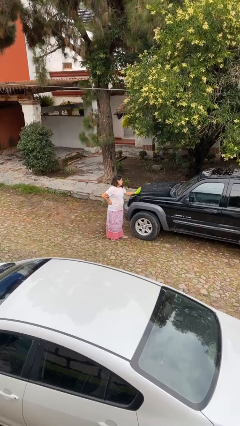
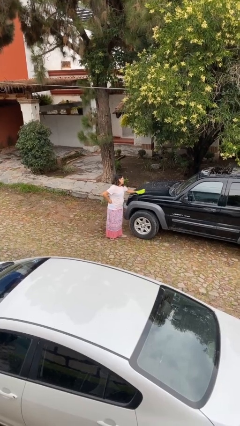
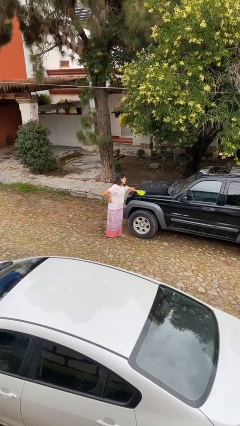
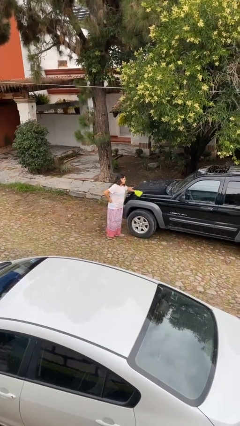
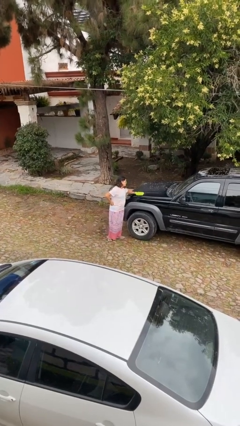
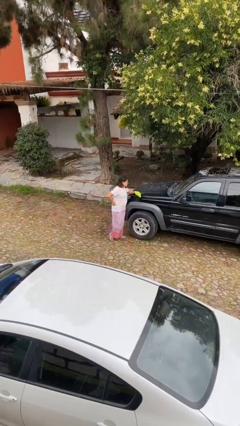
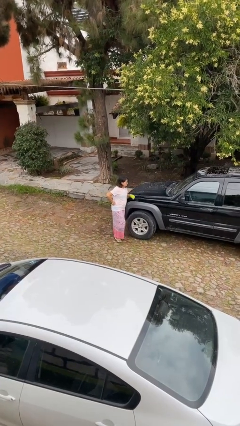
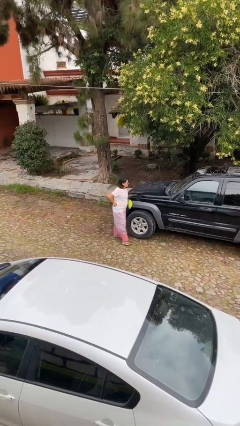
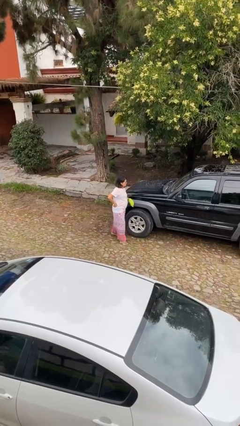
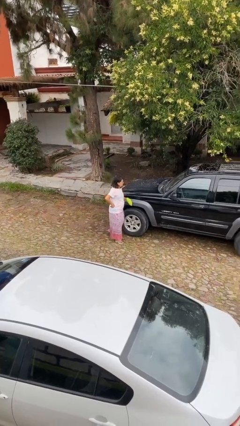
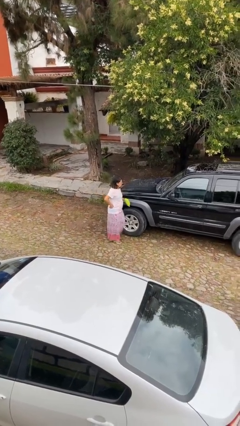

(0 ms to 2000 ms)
person polishes car with rag

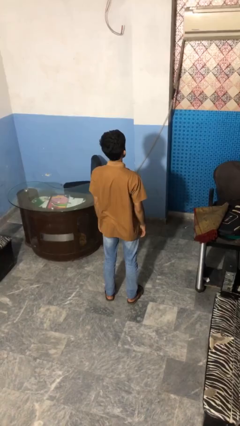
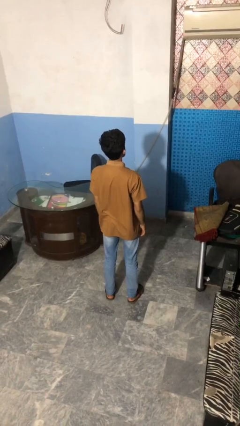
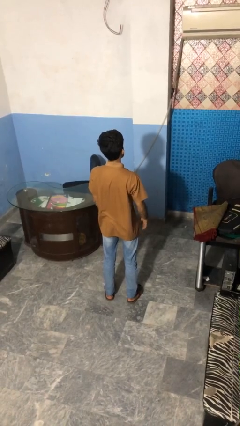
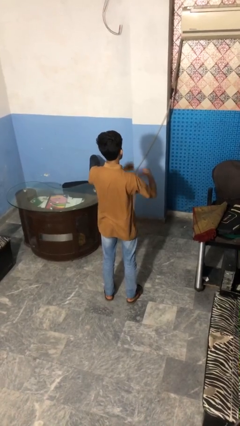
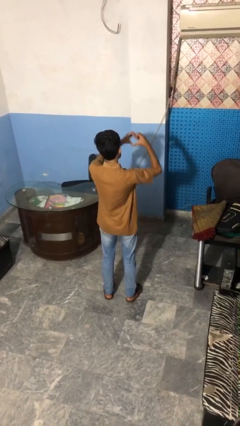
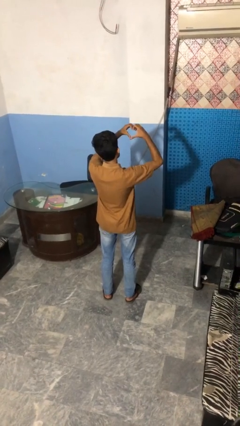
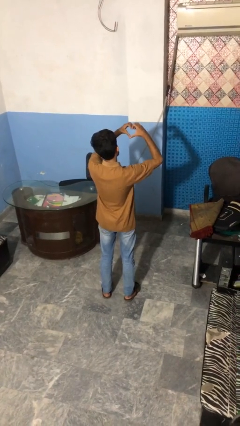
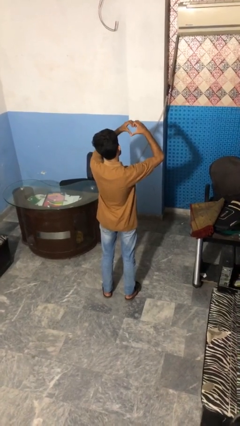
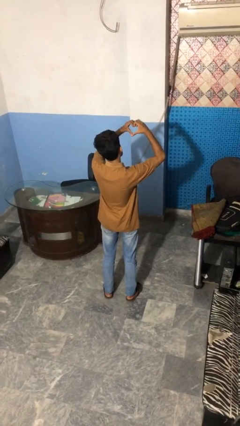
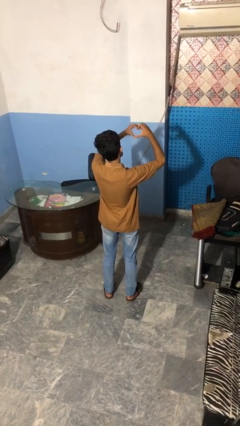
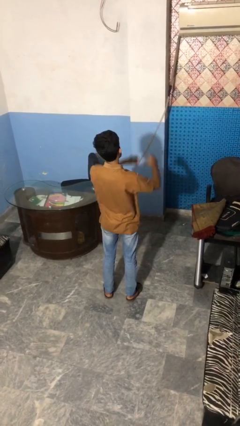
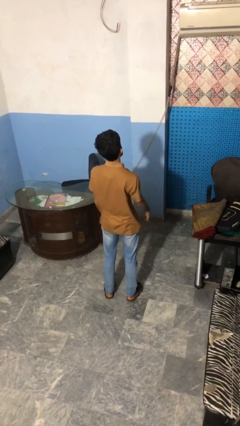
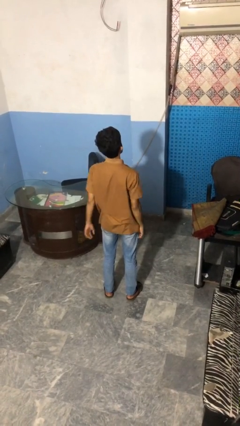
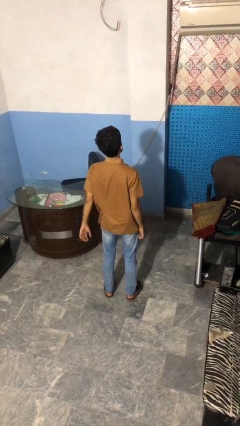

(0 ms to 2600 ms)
person gestures heart

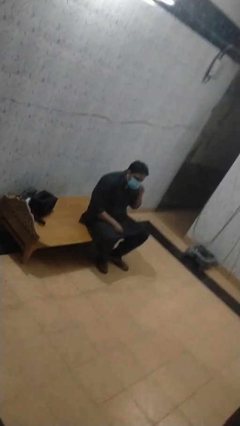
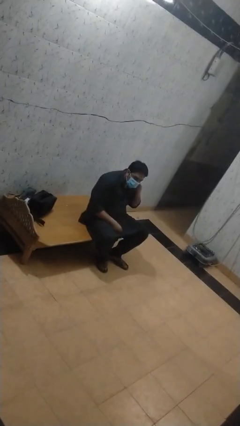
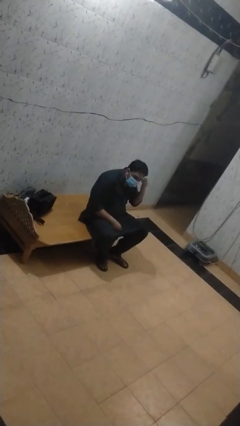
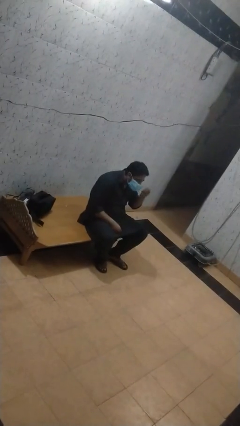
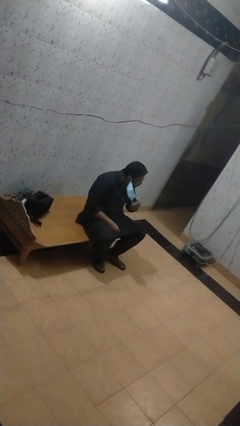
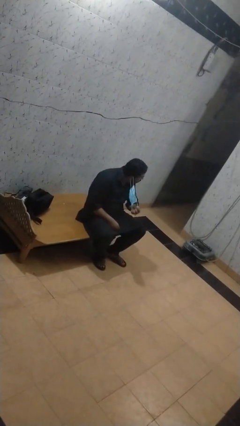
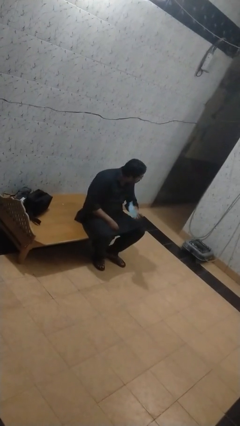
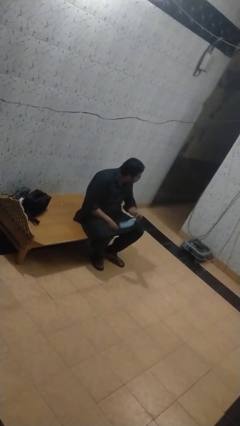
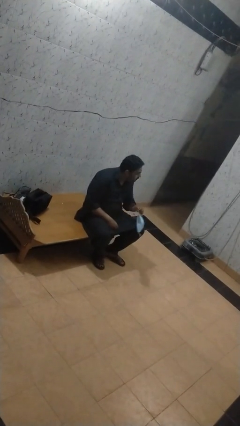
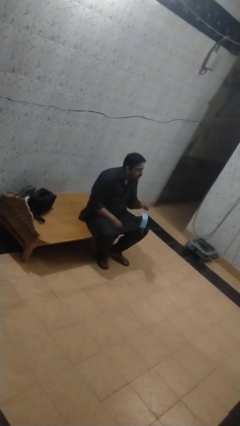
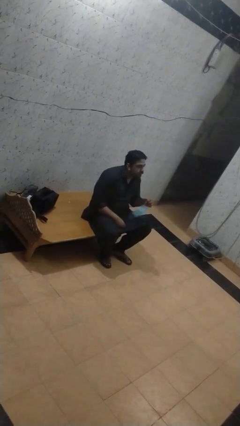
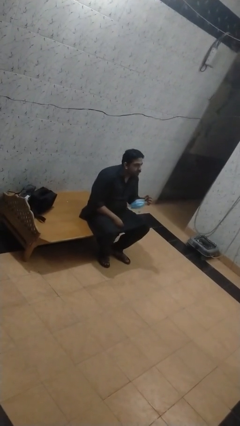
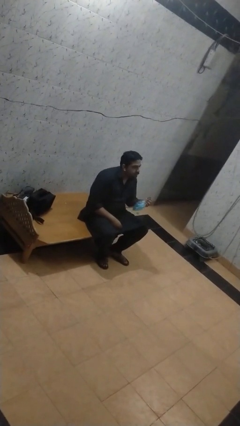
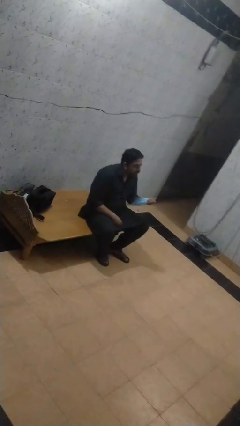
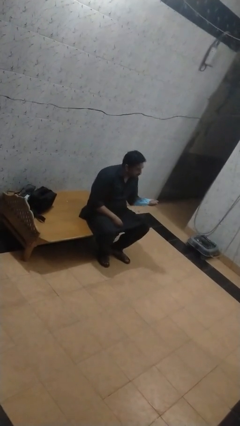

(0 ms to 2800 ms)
person takes off facemask

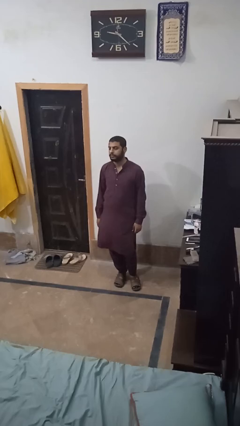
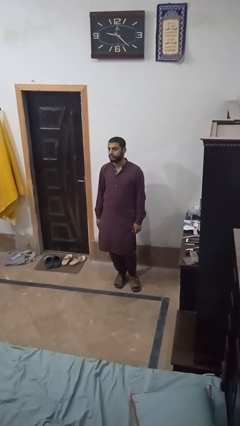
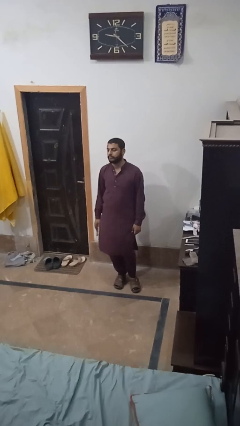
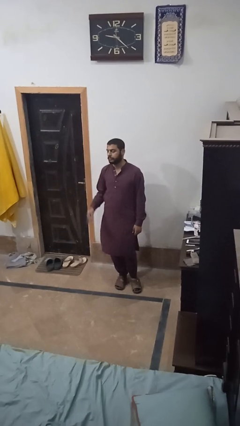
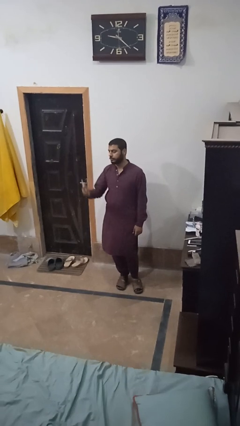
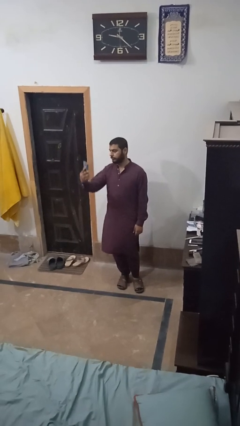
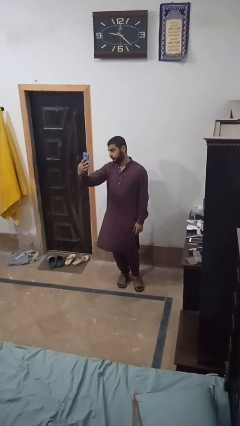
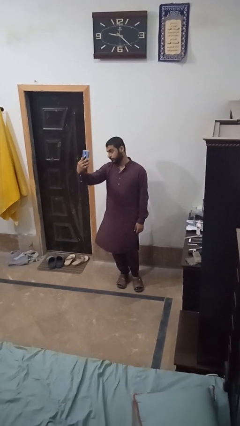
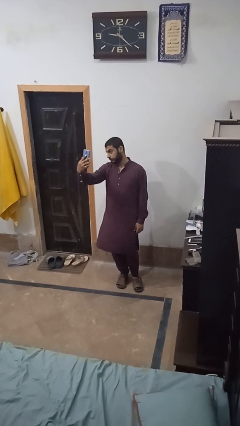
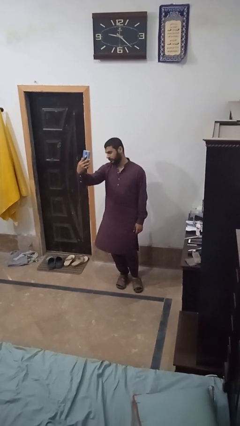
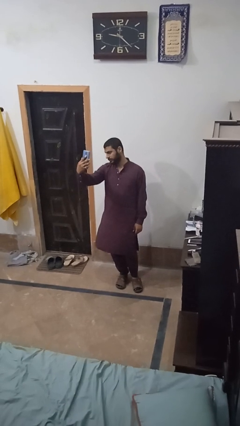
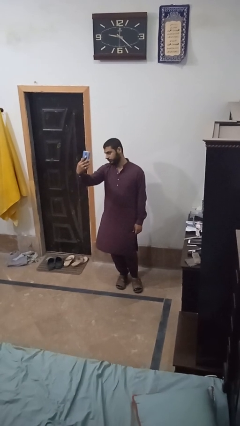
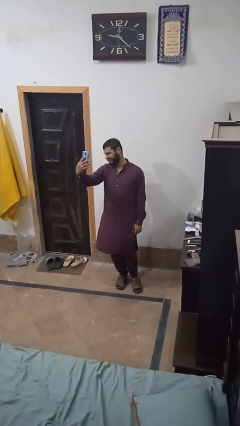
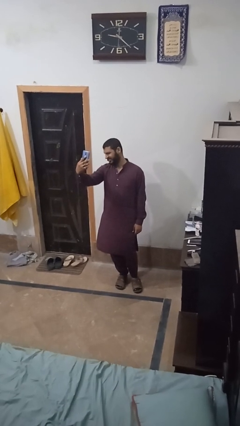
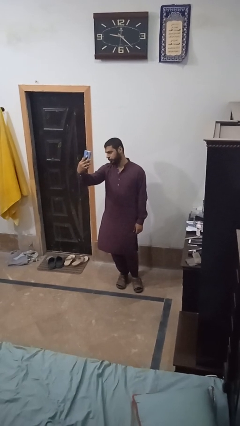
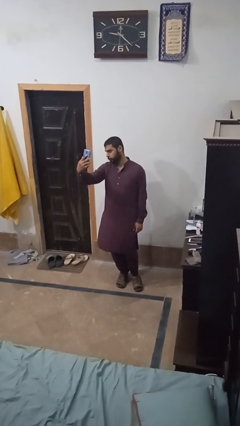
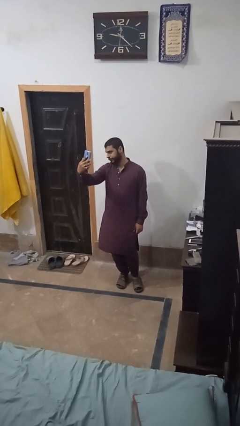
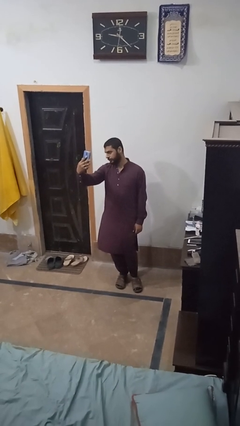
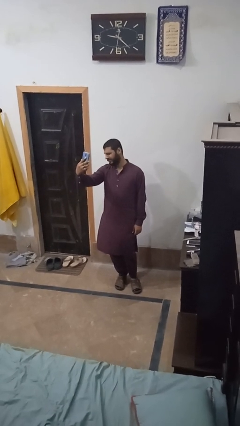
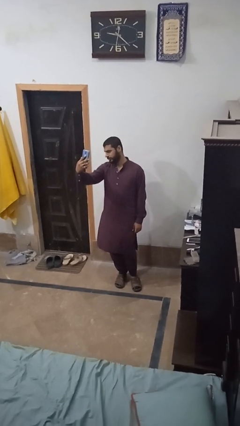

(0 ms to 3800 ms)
person takes selfie

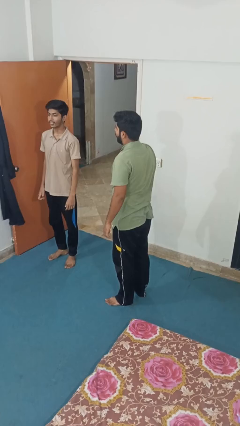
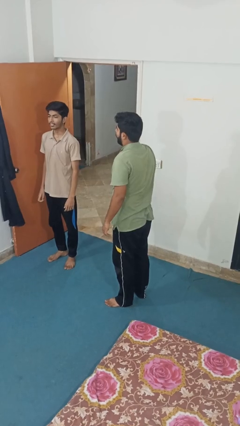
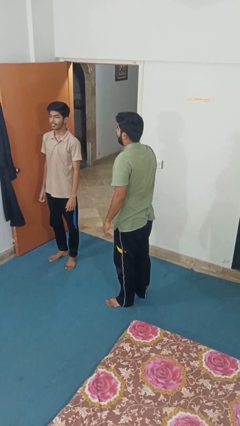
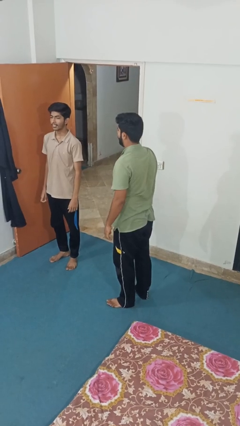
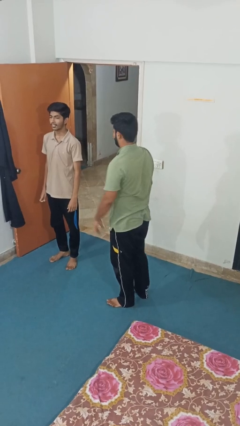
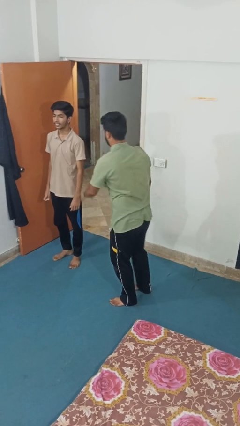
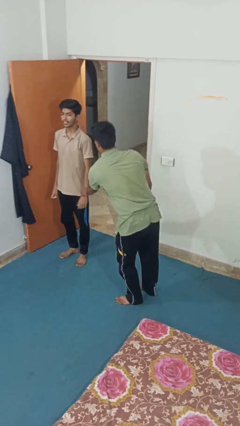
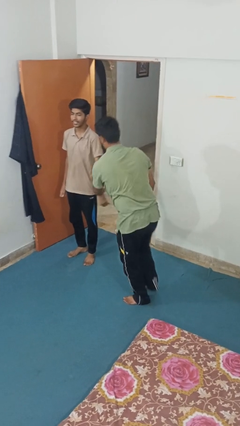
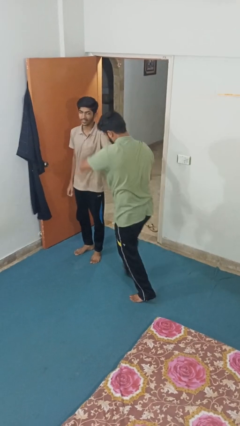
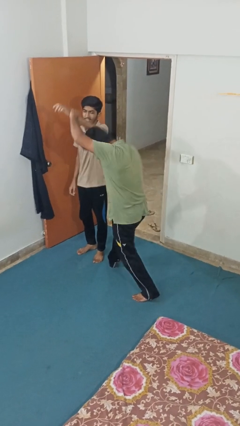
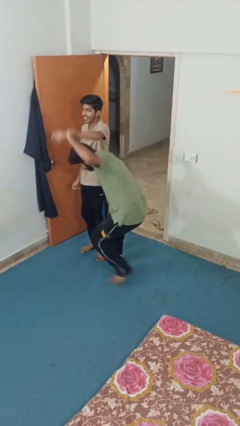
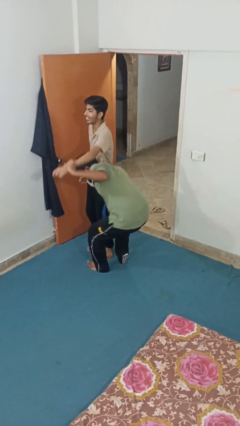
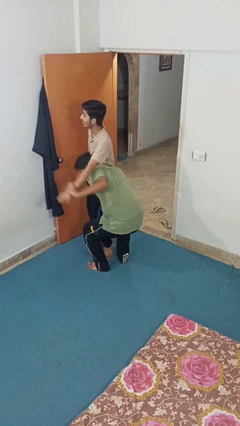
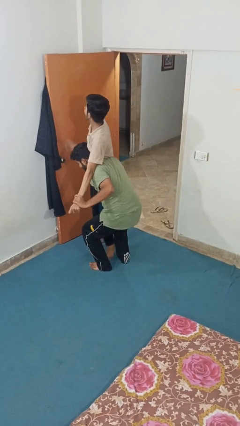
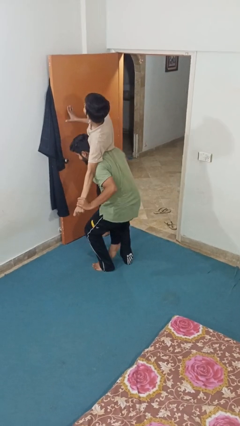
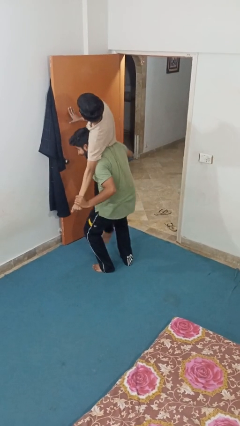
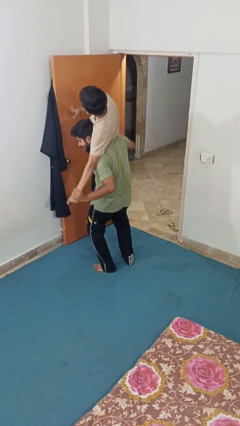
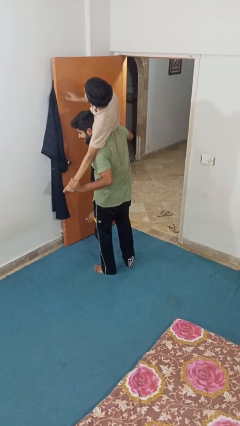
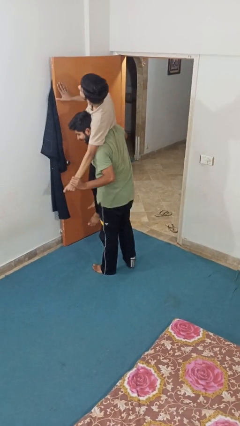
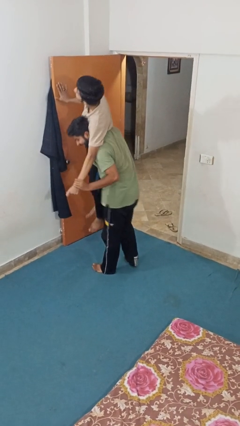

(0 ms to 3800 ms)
person carries person over shoulder

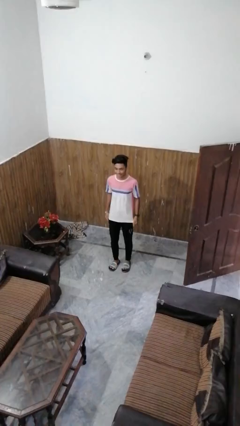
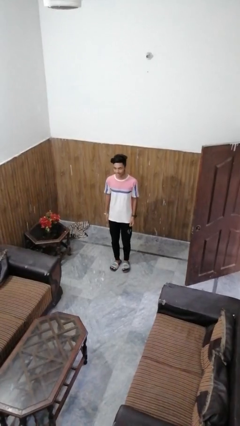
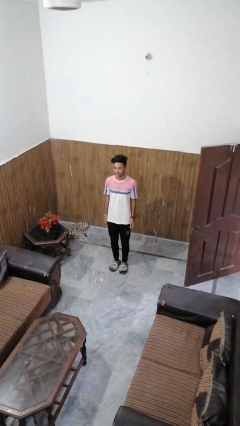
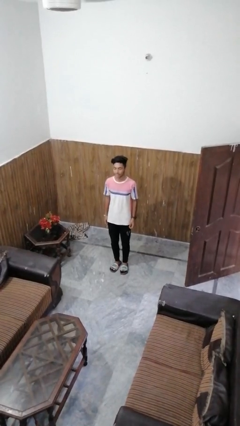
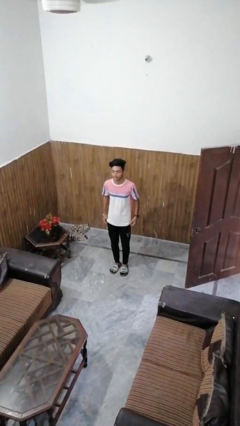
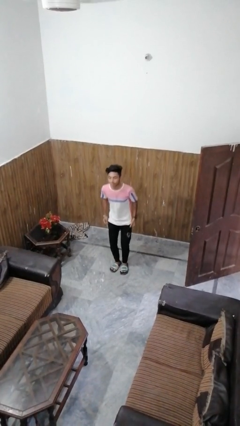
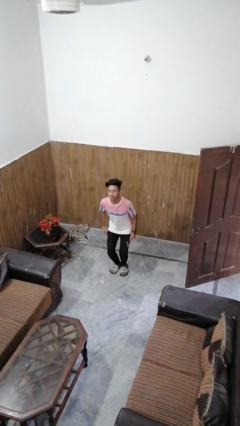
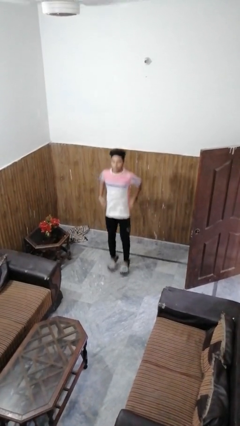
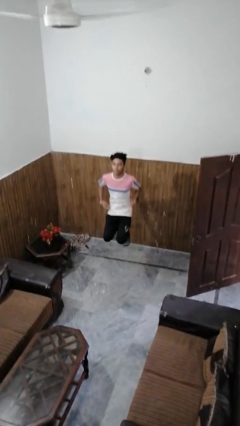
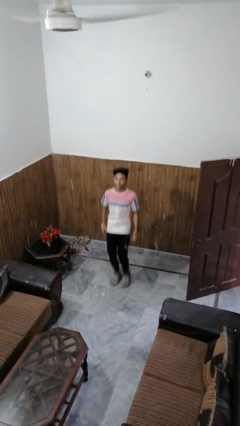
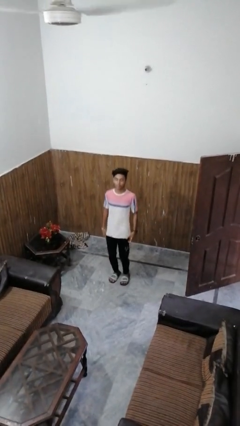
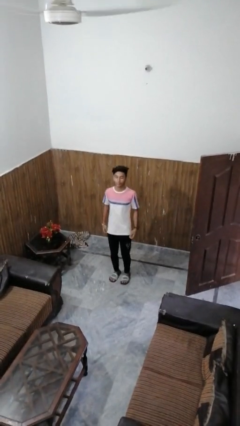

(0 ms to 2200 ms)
person jumps
